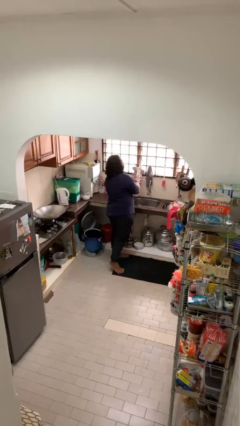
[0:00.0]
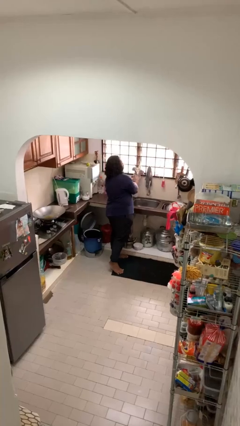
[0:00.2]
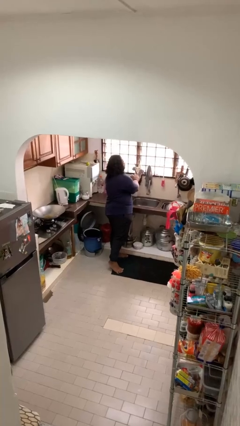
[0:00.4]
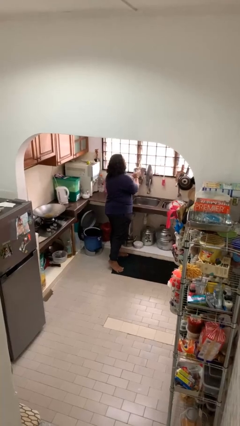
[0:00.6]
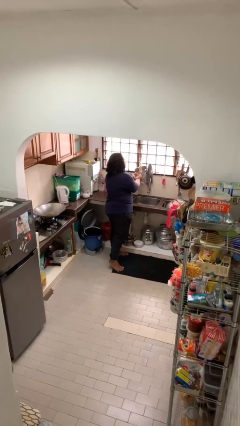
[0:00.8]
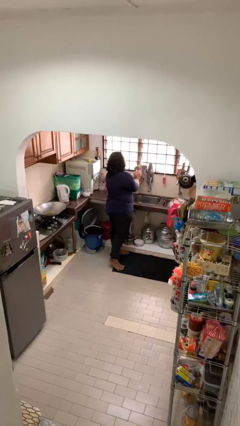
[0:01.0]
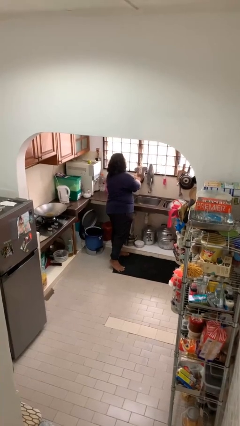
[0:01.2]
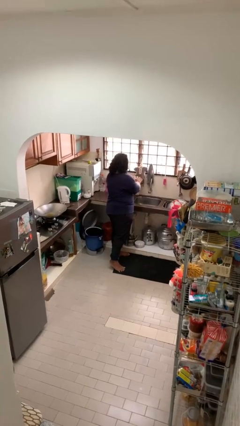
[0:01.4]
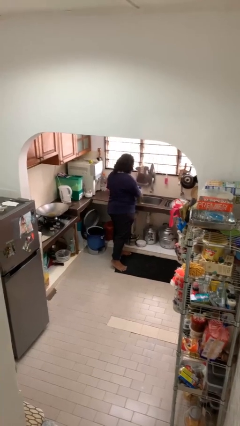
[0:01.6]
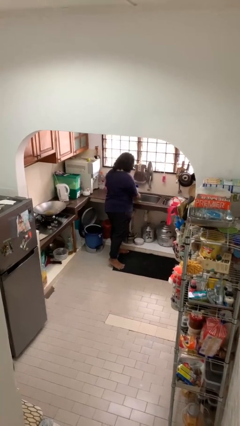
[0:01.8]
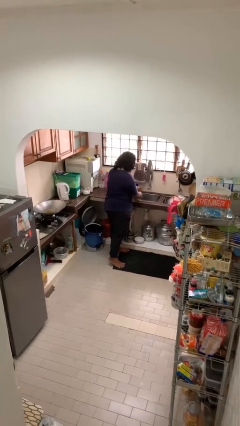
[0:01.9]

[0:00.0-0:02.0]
person dries hands with towel

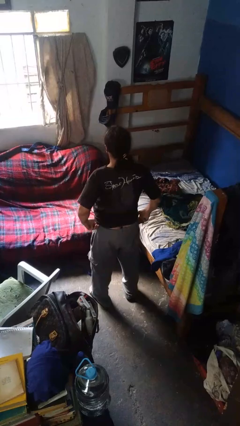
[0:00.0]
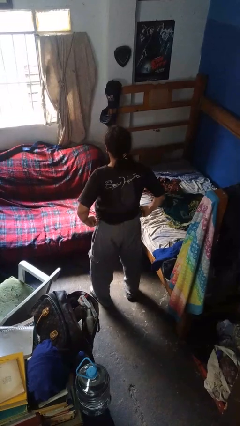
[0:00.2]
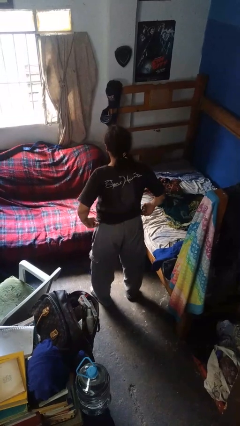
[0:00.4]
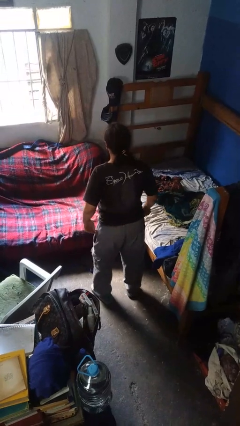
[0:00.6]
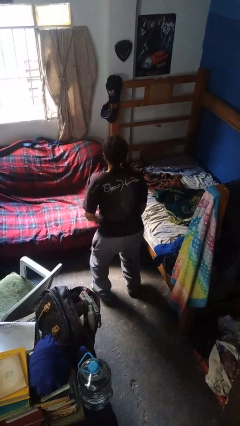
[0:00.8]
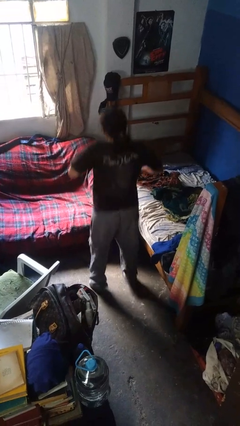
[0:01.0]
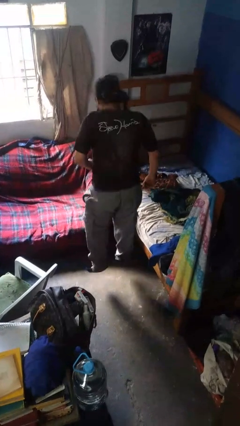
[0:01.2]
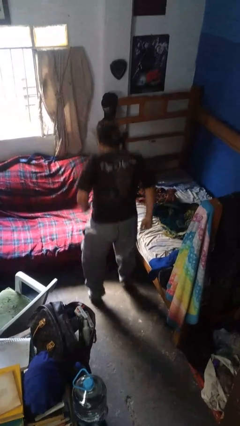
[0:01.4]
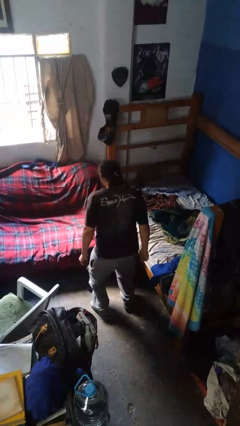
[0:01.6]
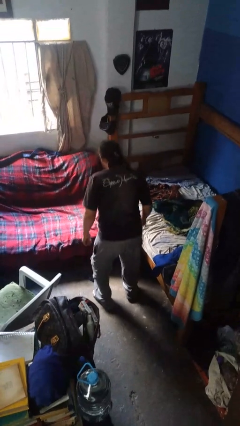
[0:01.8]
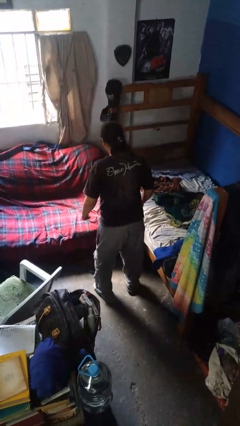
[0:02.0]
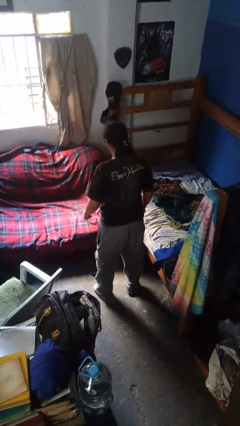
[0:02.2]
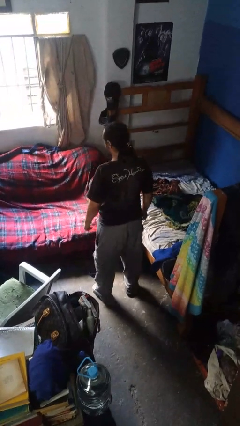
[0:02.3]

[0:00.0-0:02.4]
person jumps

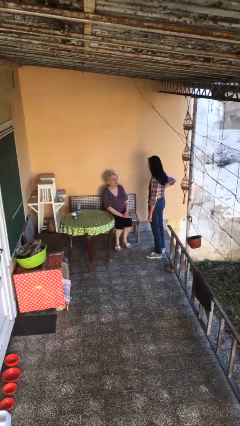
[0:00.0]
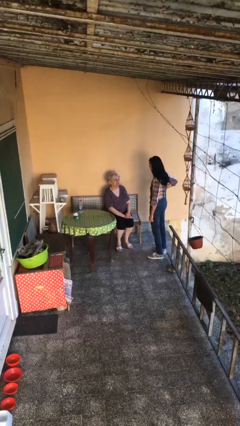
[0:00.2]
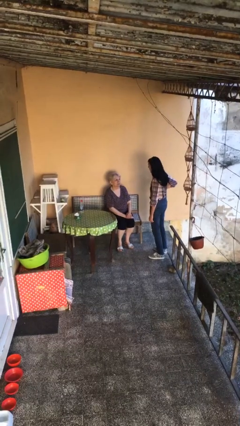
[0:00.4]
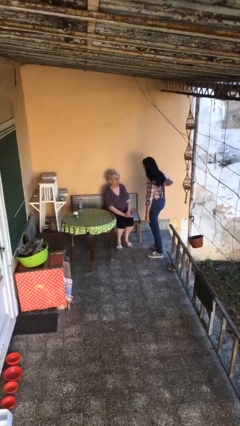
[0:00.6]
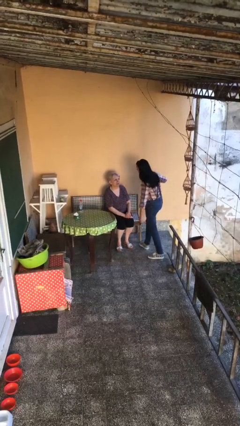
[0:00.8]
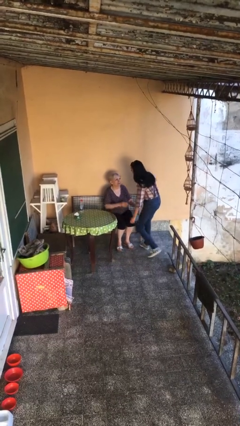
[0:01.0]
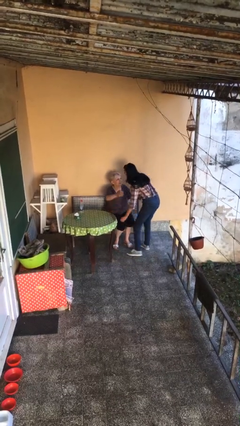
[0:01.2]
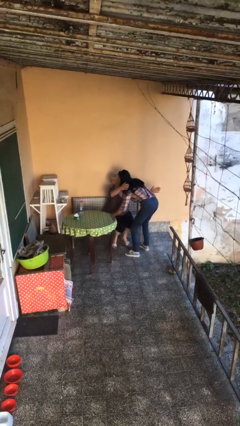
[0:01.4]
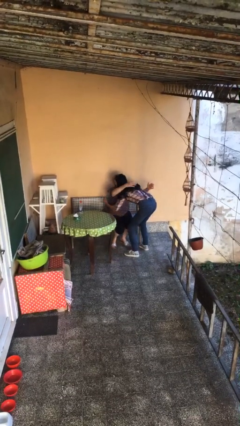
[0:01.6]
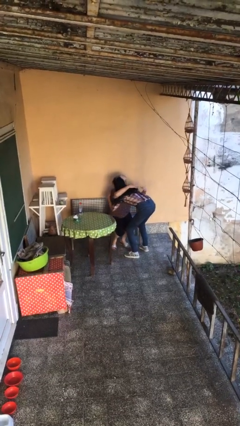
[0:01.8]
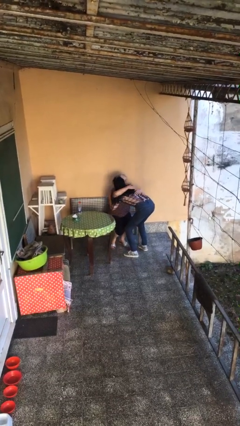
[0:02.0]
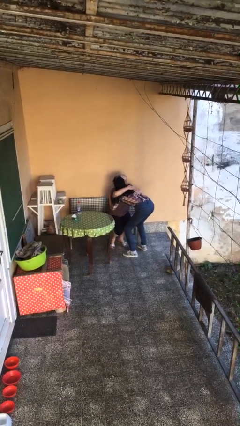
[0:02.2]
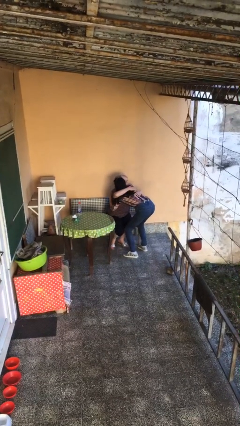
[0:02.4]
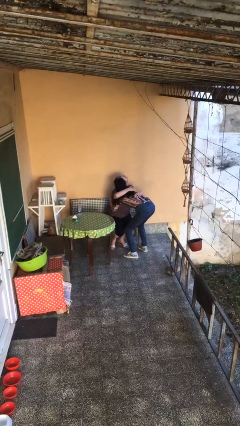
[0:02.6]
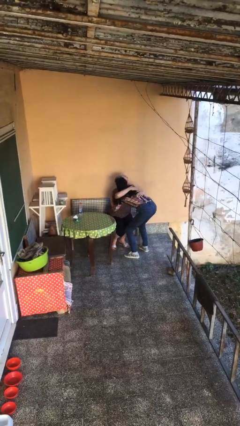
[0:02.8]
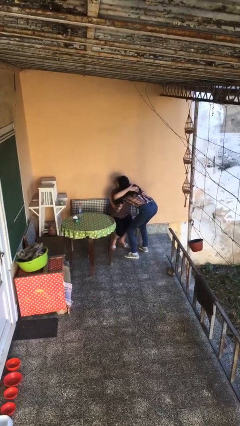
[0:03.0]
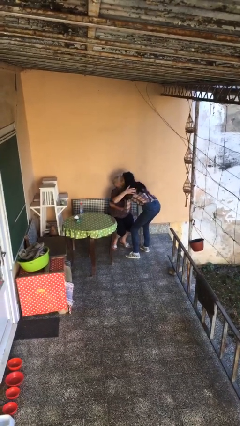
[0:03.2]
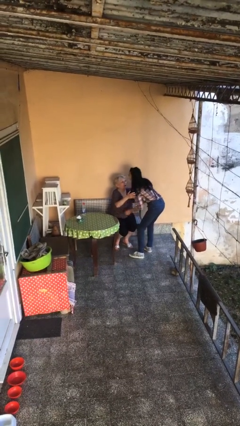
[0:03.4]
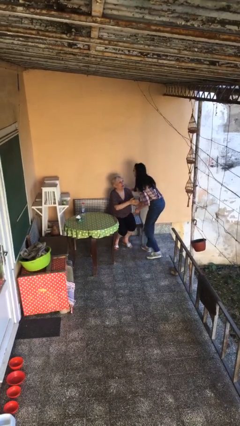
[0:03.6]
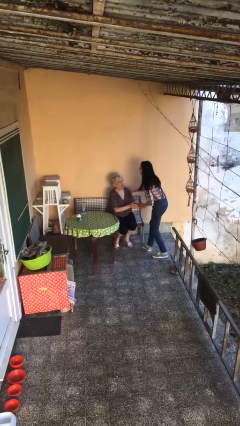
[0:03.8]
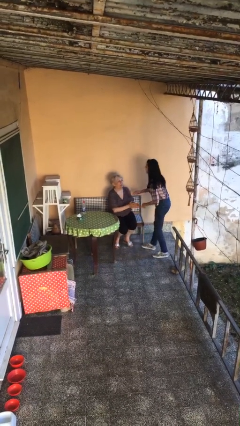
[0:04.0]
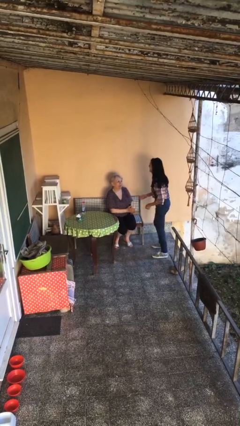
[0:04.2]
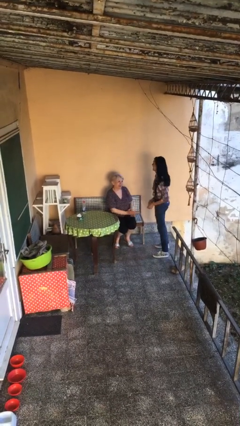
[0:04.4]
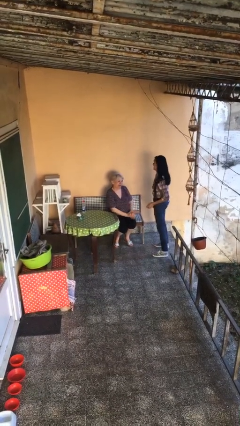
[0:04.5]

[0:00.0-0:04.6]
person embraces person

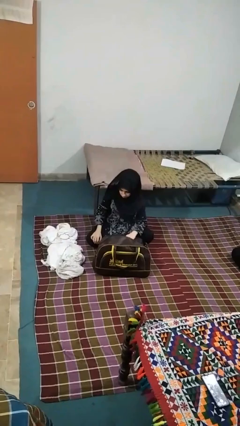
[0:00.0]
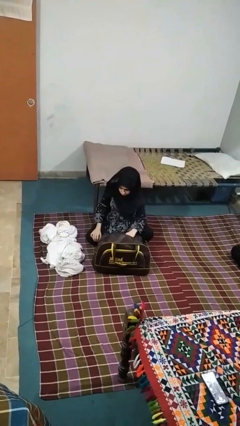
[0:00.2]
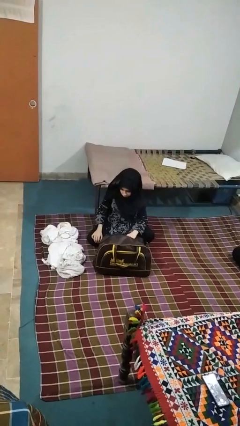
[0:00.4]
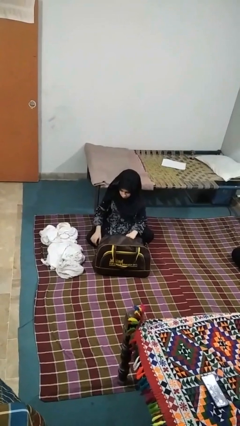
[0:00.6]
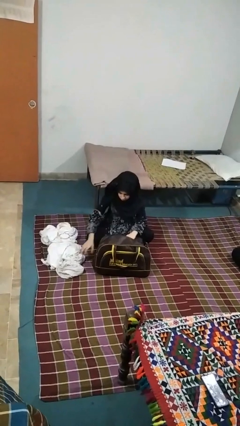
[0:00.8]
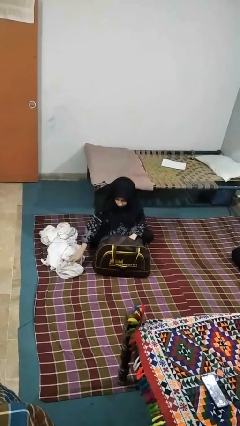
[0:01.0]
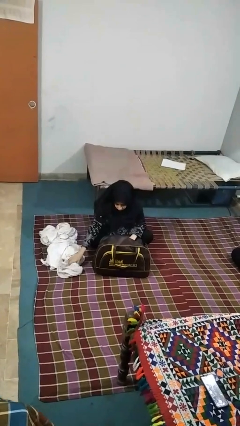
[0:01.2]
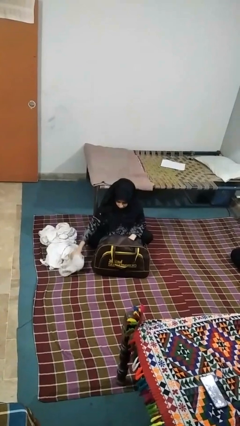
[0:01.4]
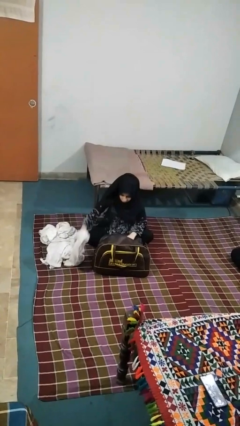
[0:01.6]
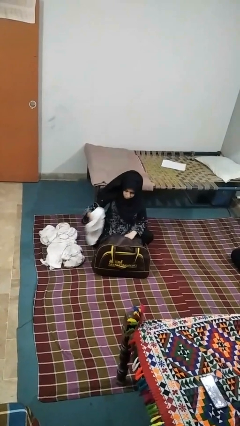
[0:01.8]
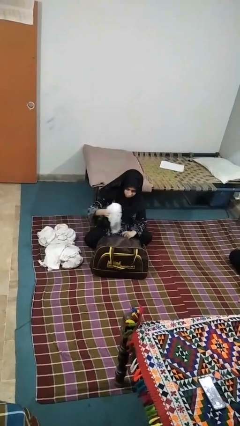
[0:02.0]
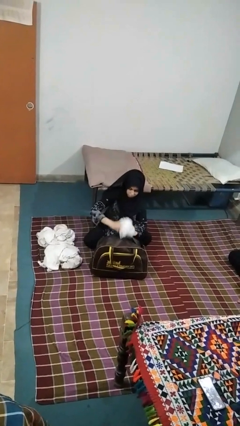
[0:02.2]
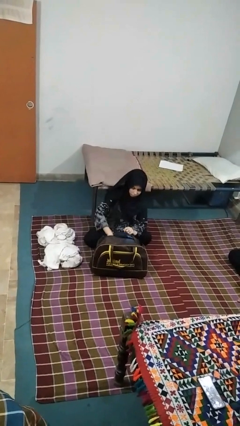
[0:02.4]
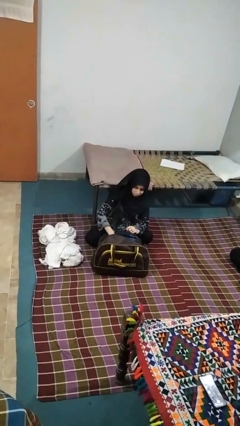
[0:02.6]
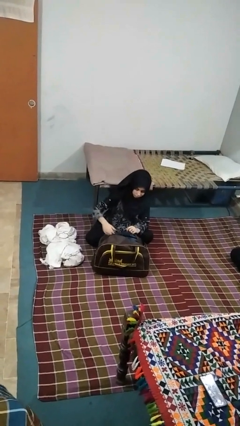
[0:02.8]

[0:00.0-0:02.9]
person loads clothes into suitcase

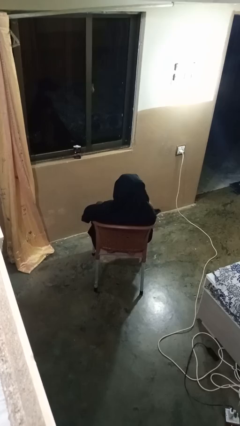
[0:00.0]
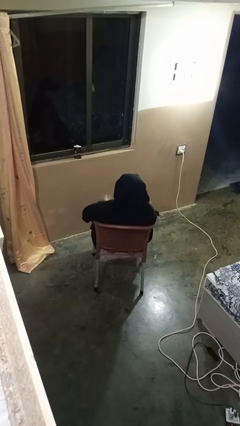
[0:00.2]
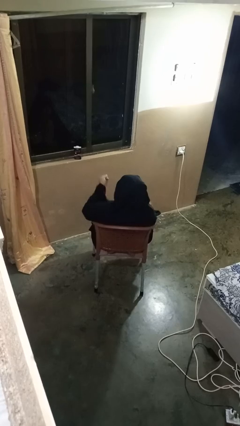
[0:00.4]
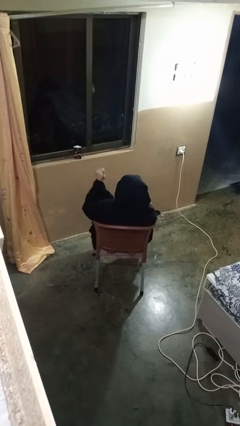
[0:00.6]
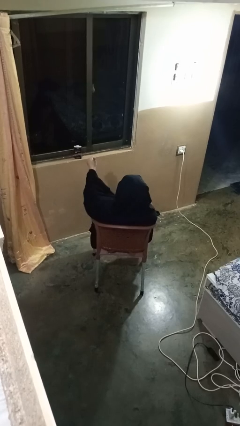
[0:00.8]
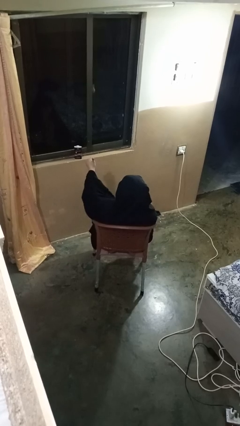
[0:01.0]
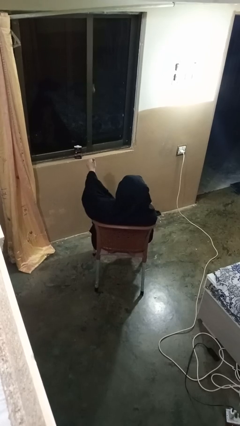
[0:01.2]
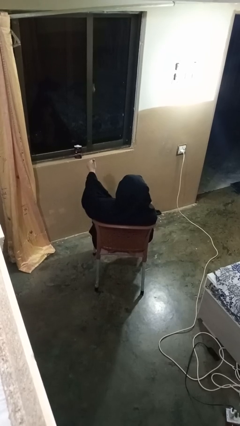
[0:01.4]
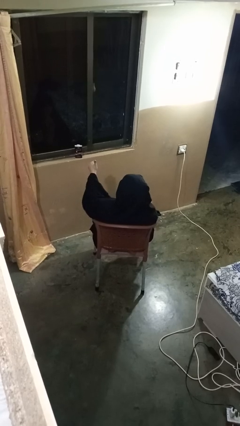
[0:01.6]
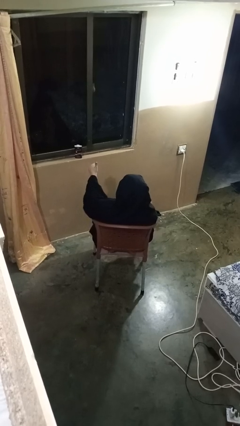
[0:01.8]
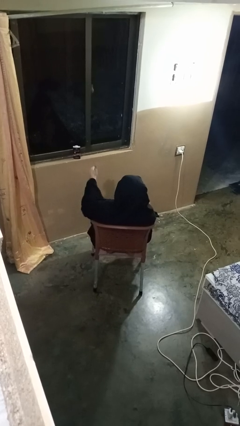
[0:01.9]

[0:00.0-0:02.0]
person gestures thumbs up

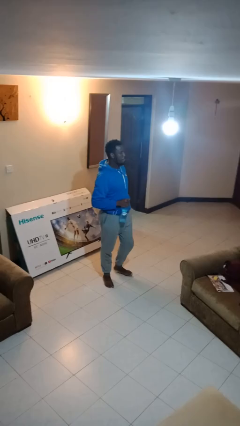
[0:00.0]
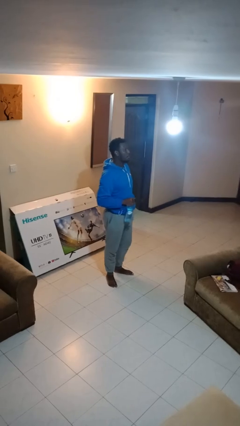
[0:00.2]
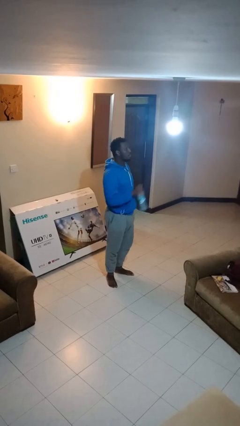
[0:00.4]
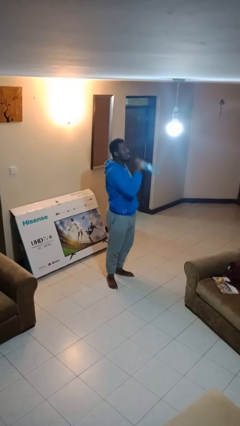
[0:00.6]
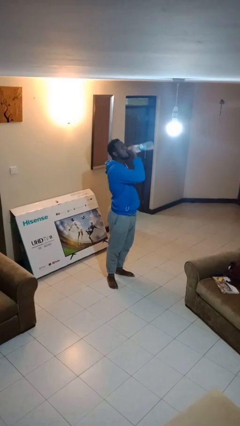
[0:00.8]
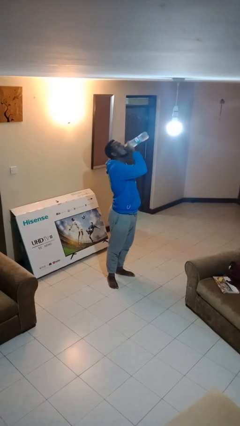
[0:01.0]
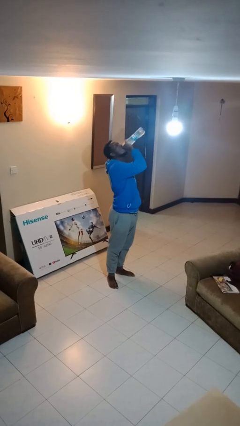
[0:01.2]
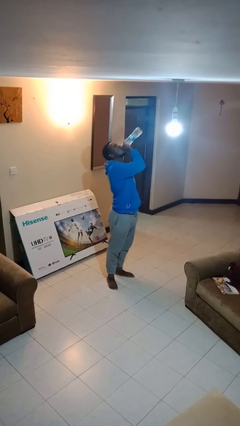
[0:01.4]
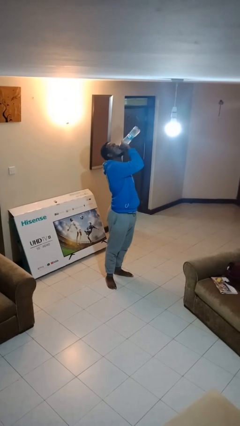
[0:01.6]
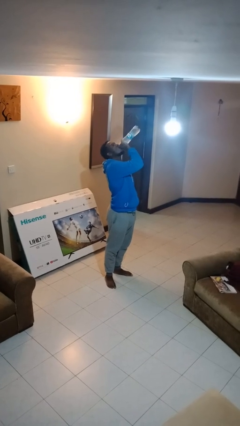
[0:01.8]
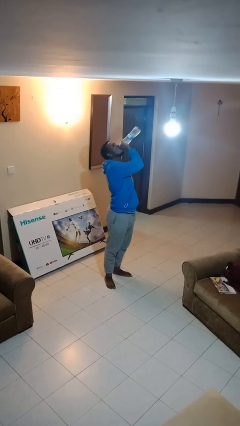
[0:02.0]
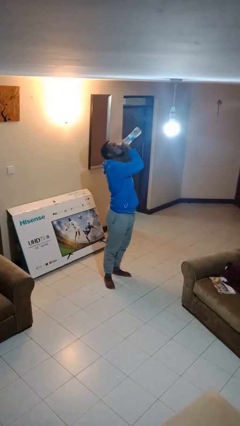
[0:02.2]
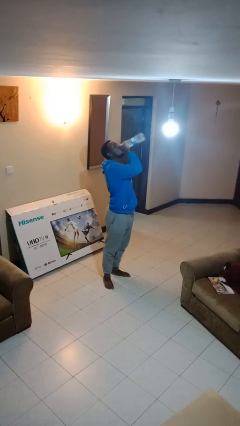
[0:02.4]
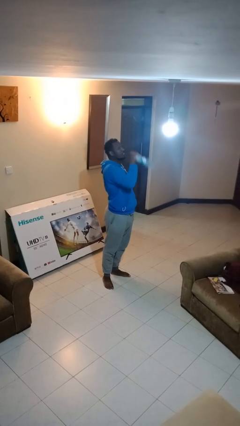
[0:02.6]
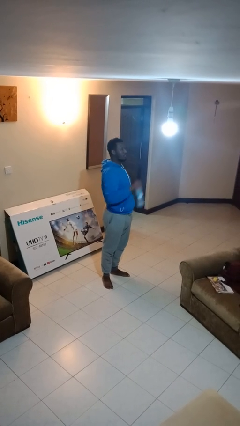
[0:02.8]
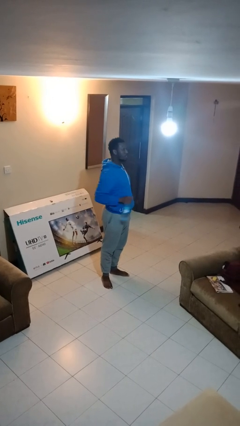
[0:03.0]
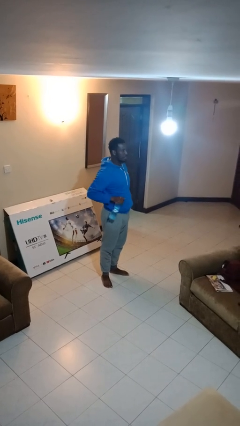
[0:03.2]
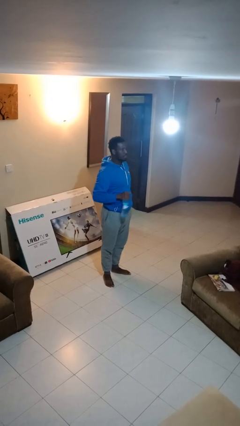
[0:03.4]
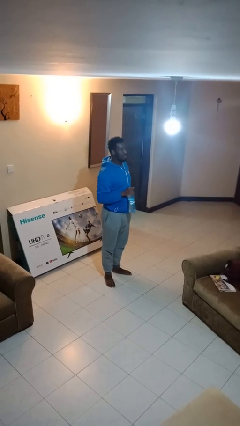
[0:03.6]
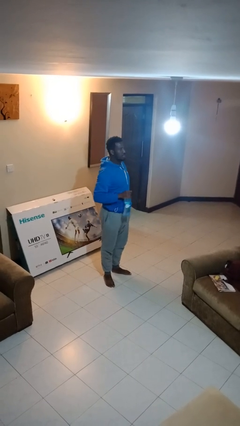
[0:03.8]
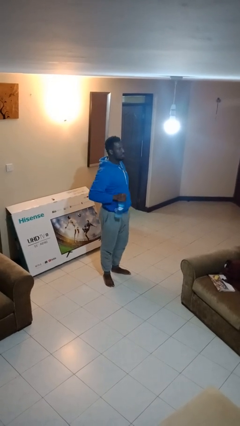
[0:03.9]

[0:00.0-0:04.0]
person drinks from bottle
